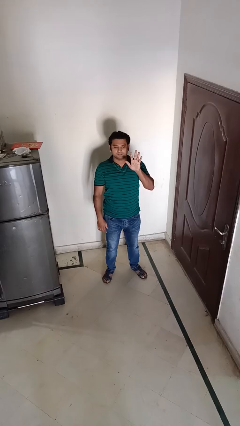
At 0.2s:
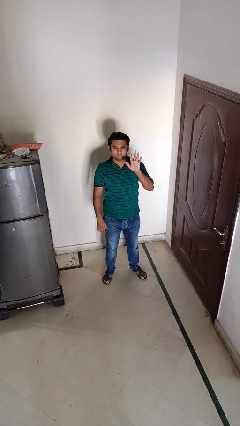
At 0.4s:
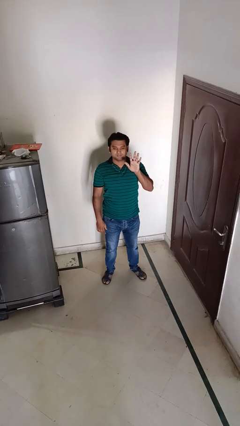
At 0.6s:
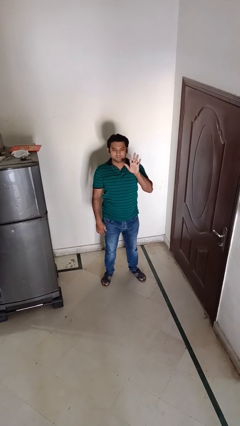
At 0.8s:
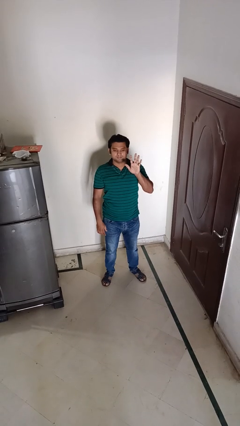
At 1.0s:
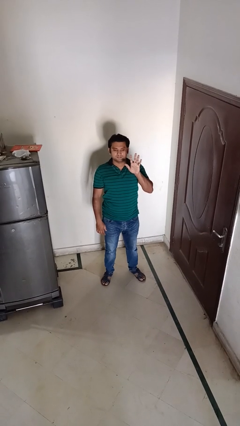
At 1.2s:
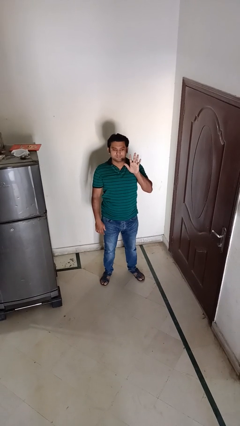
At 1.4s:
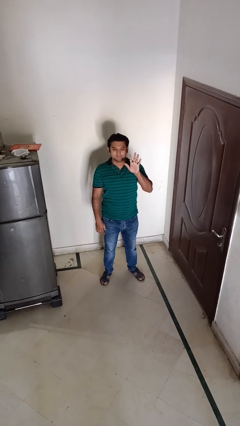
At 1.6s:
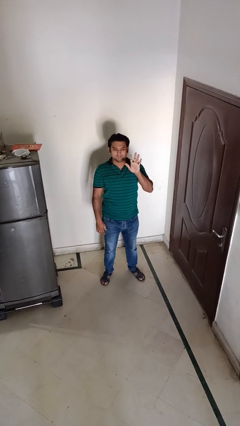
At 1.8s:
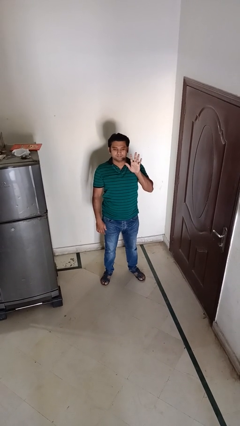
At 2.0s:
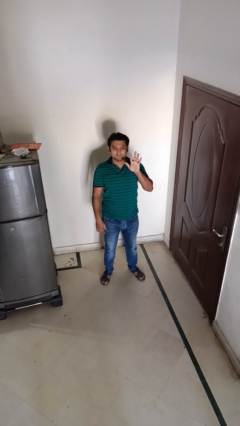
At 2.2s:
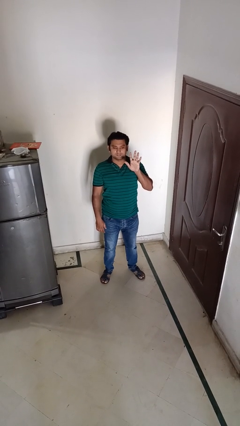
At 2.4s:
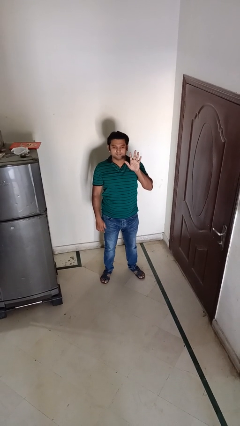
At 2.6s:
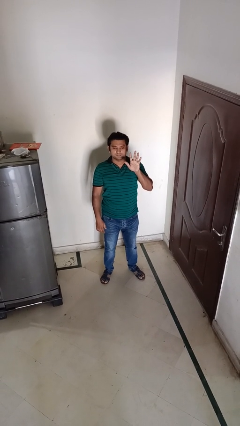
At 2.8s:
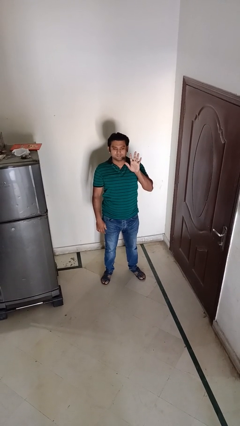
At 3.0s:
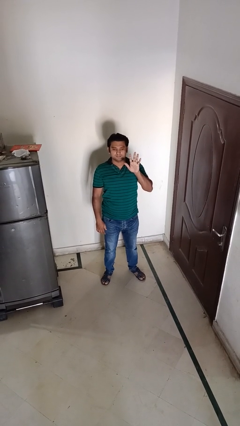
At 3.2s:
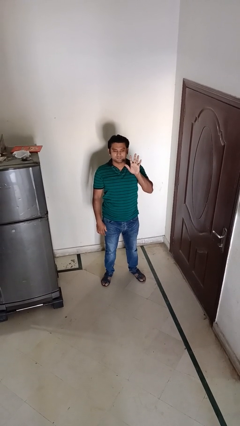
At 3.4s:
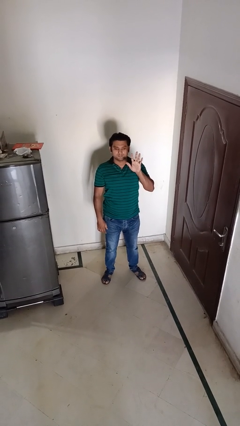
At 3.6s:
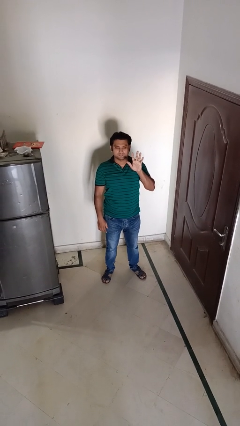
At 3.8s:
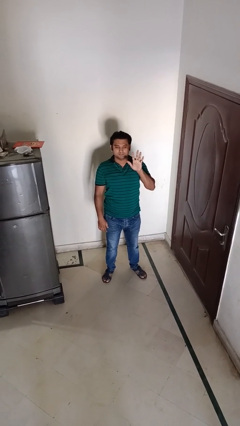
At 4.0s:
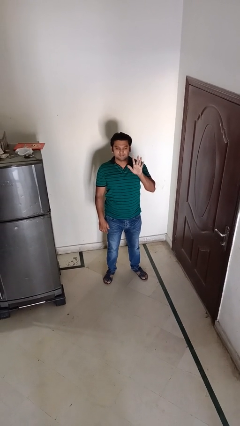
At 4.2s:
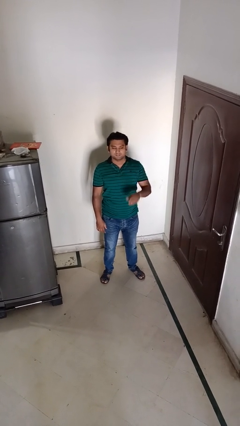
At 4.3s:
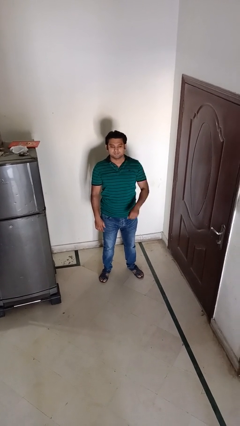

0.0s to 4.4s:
person gestures number five

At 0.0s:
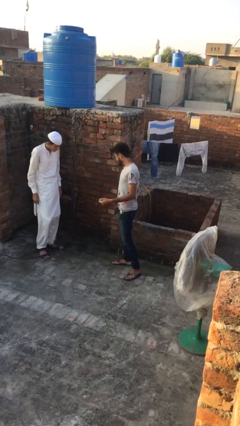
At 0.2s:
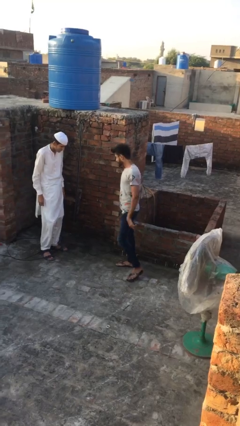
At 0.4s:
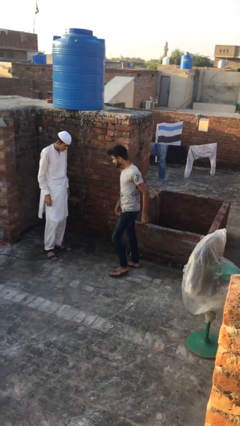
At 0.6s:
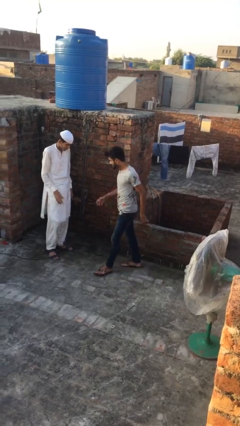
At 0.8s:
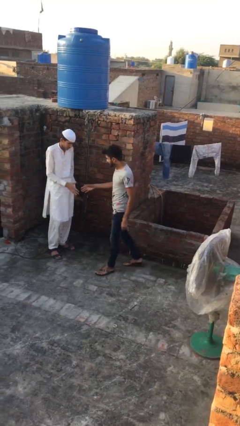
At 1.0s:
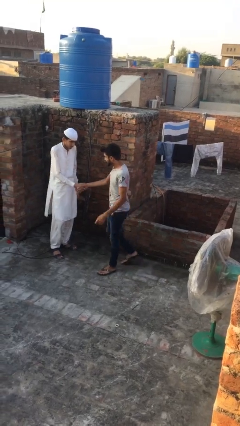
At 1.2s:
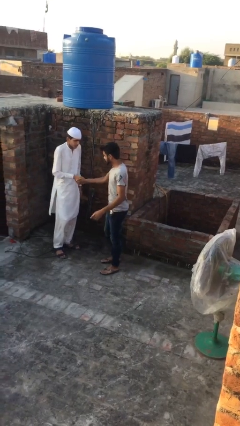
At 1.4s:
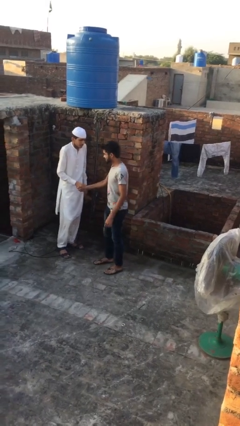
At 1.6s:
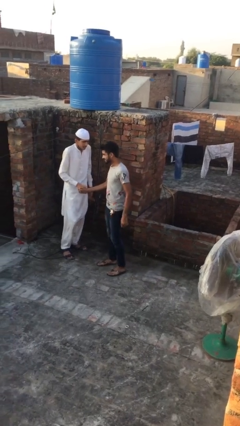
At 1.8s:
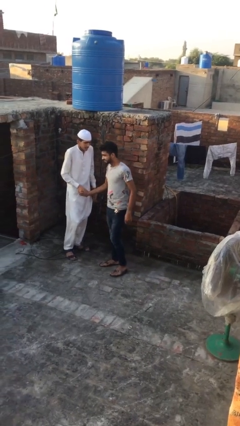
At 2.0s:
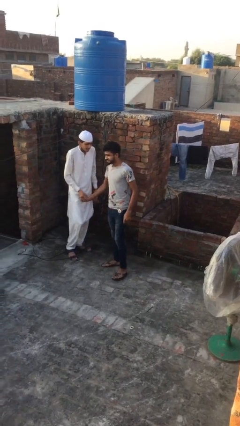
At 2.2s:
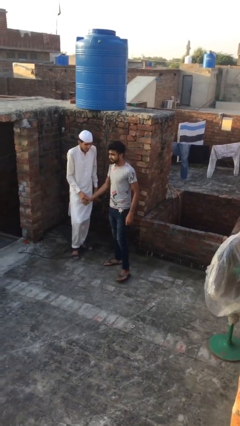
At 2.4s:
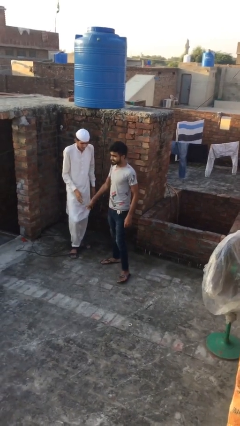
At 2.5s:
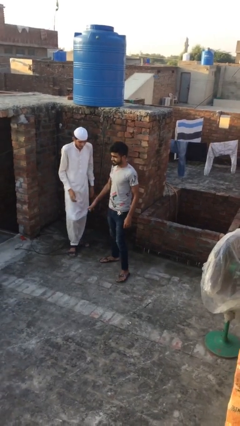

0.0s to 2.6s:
person shakes hand

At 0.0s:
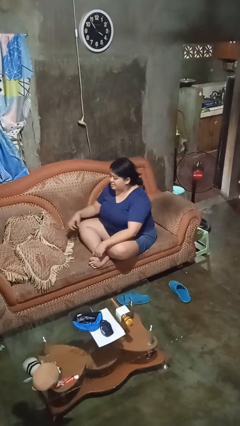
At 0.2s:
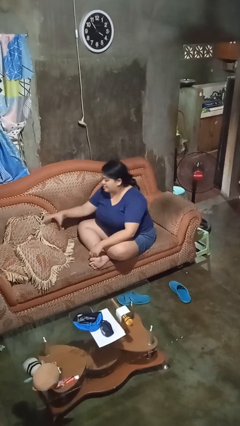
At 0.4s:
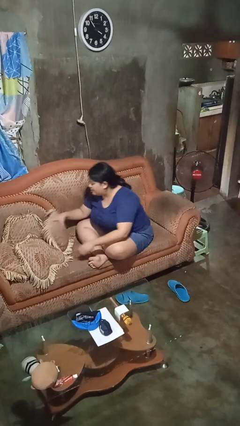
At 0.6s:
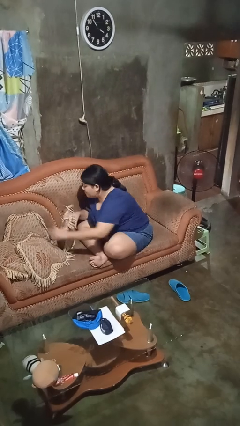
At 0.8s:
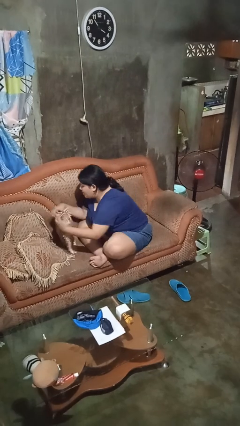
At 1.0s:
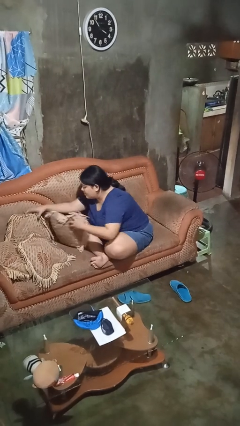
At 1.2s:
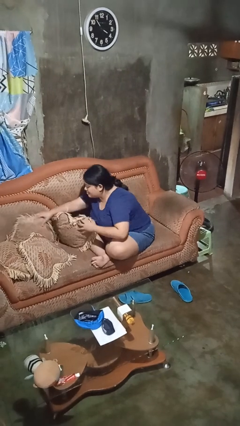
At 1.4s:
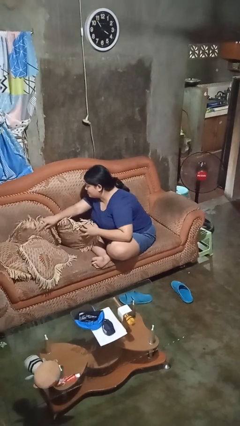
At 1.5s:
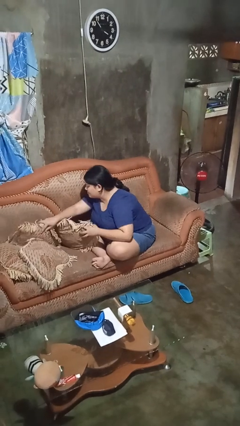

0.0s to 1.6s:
person searches in couch

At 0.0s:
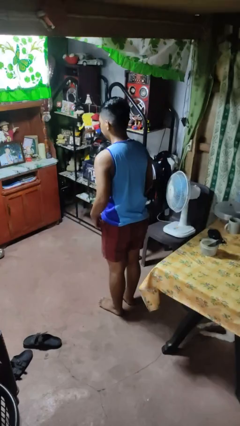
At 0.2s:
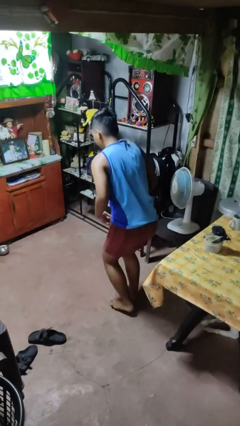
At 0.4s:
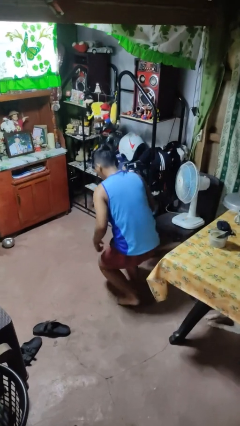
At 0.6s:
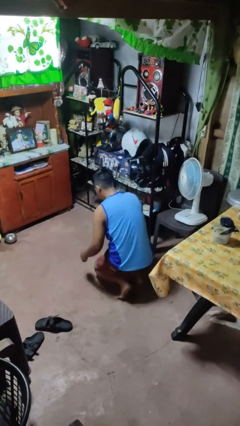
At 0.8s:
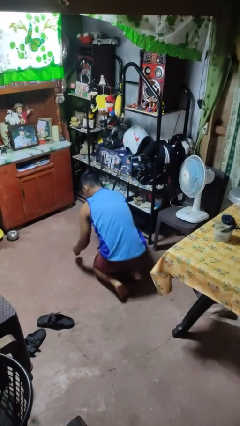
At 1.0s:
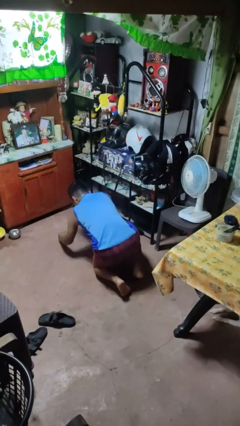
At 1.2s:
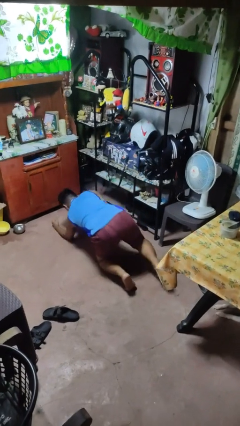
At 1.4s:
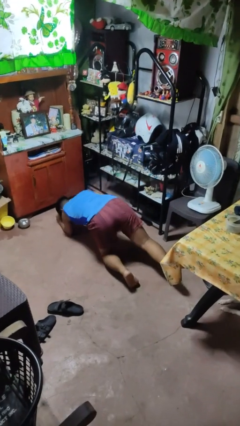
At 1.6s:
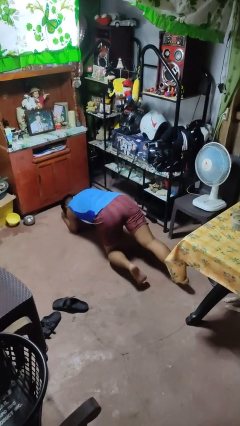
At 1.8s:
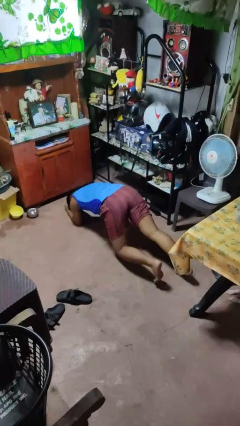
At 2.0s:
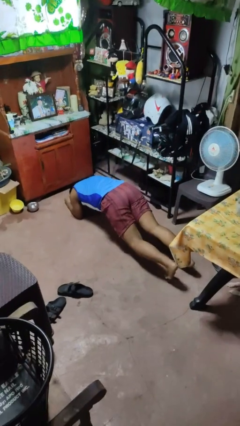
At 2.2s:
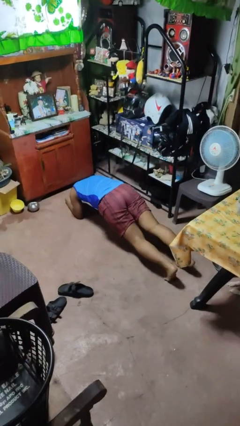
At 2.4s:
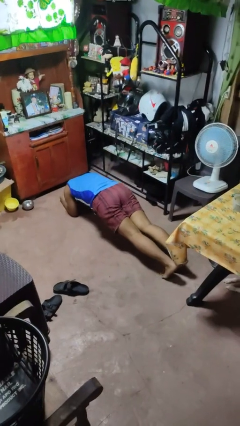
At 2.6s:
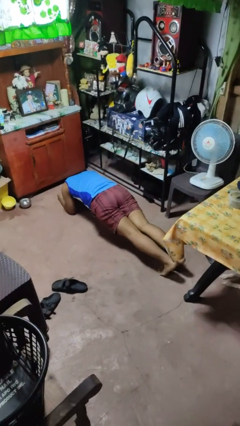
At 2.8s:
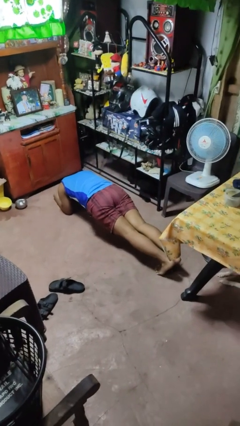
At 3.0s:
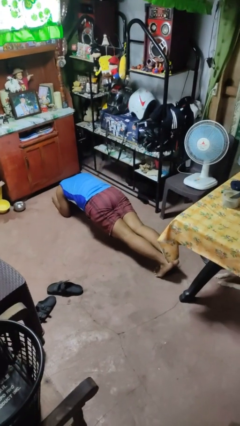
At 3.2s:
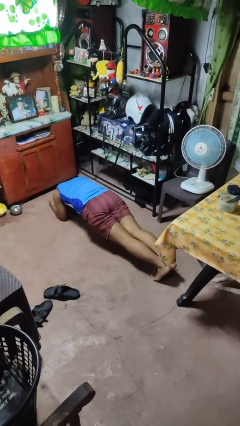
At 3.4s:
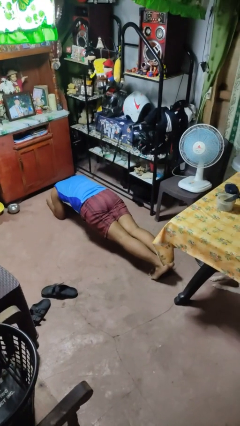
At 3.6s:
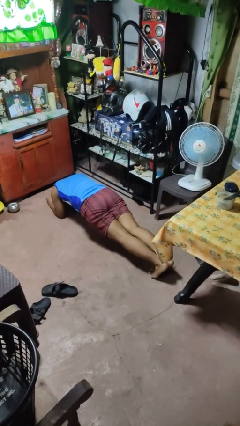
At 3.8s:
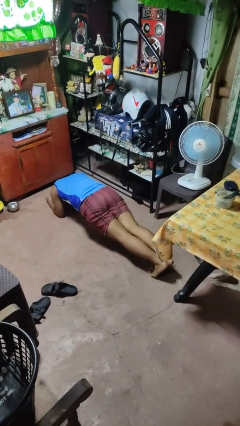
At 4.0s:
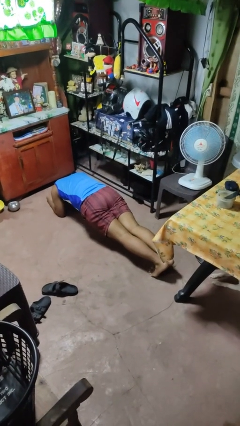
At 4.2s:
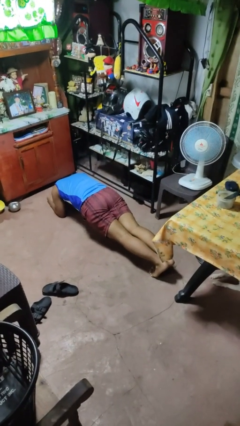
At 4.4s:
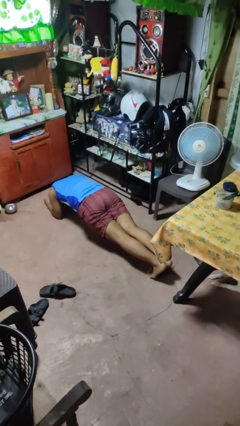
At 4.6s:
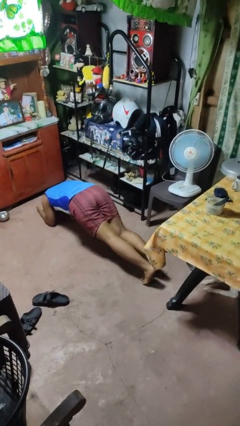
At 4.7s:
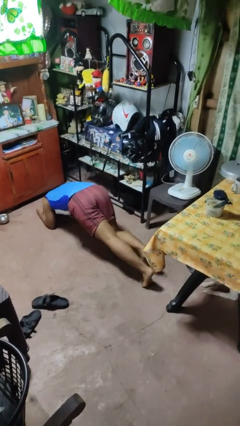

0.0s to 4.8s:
person exercises with plank

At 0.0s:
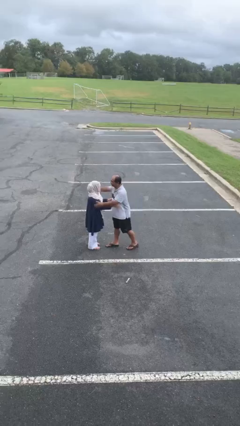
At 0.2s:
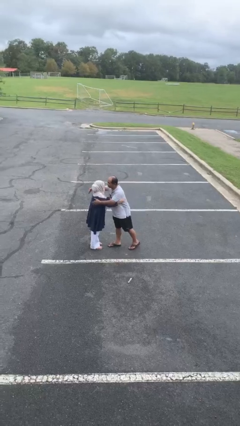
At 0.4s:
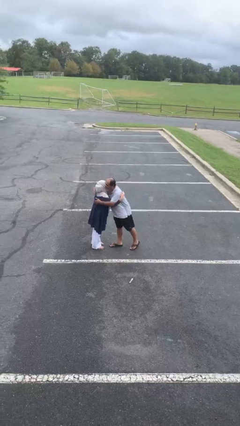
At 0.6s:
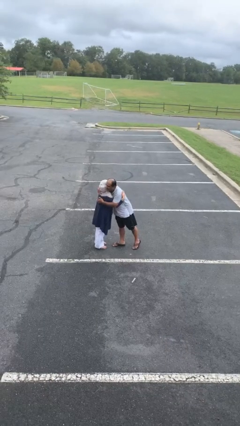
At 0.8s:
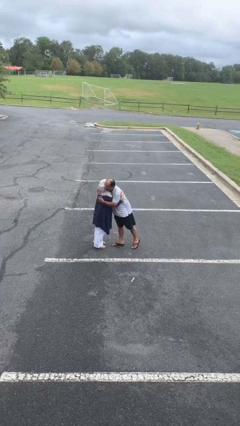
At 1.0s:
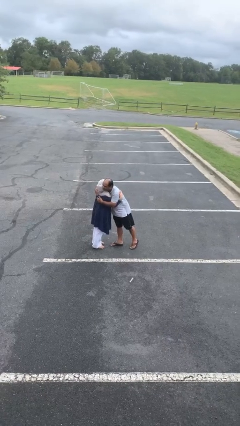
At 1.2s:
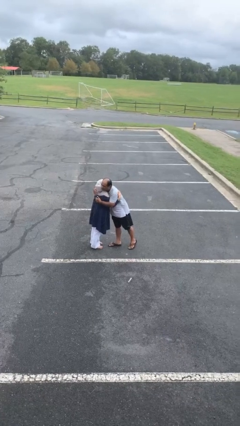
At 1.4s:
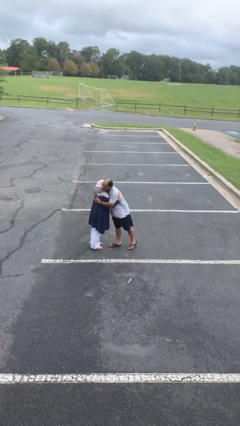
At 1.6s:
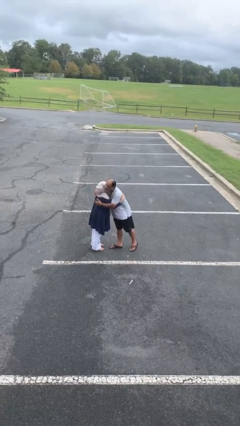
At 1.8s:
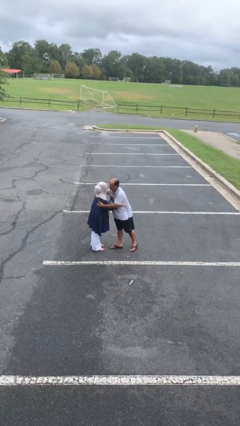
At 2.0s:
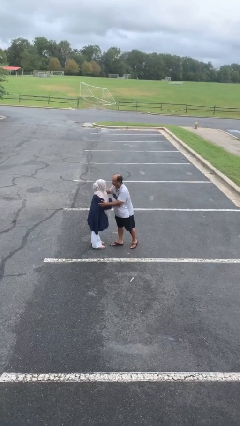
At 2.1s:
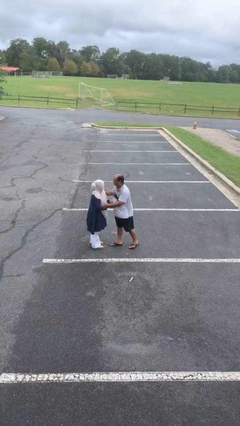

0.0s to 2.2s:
person embraces person

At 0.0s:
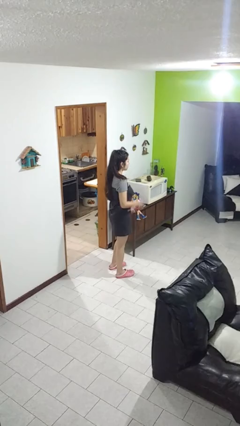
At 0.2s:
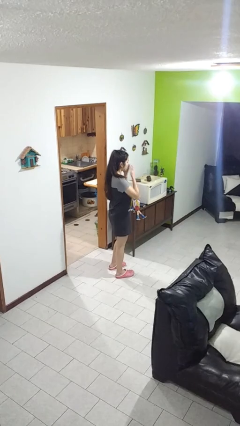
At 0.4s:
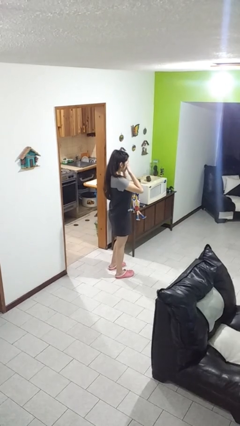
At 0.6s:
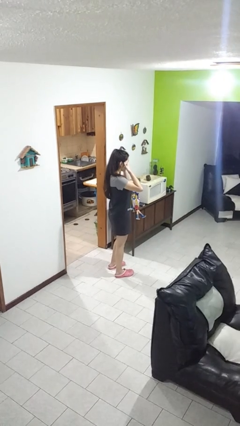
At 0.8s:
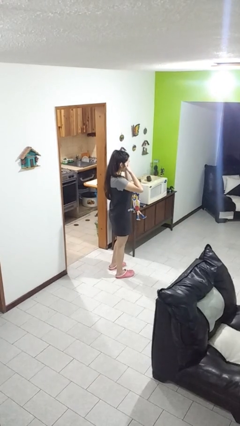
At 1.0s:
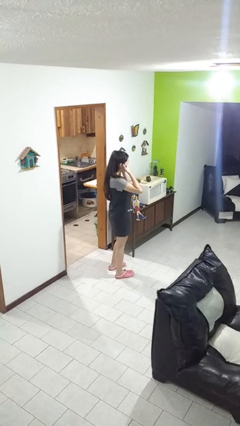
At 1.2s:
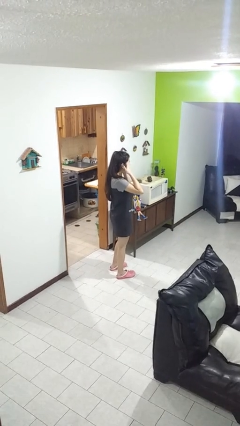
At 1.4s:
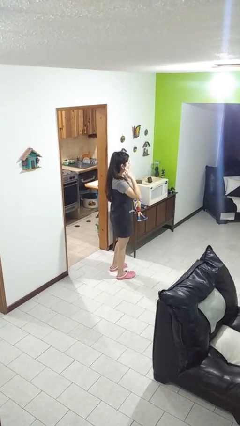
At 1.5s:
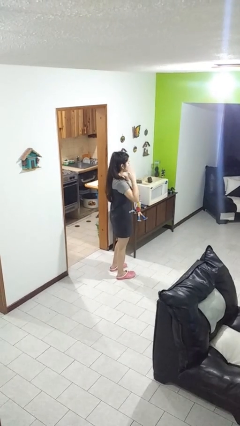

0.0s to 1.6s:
person rubs eyes

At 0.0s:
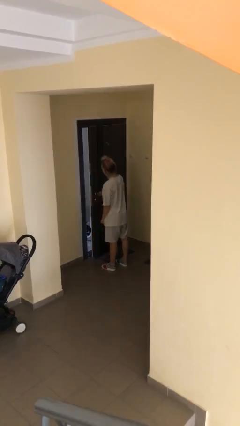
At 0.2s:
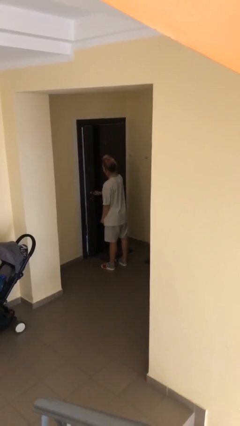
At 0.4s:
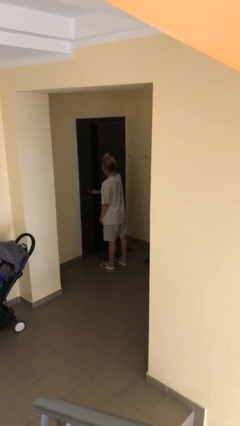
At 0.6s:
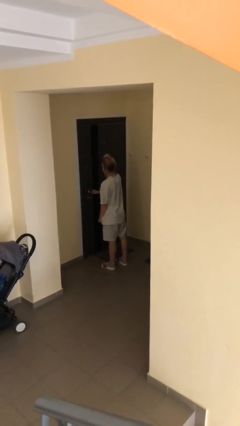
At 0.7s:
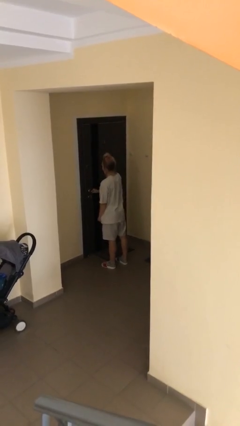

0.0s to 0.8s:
person closes facility door
